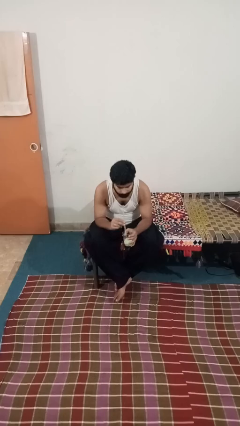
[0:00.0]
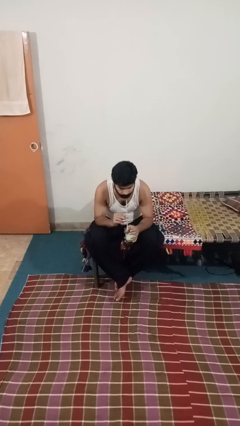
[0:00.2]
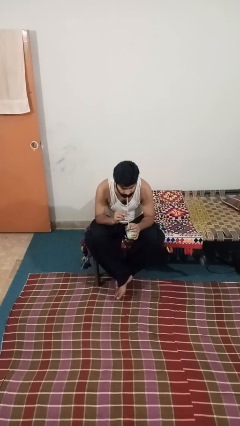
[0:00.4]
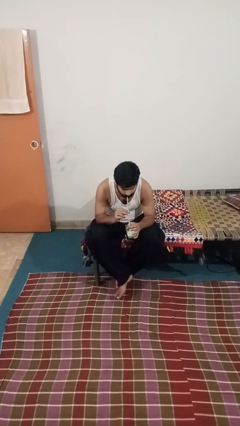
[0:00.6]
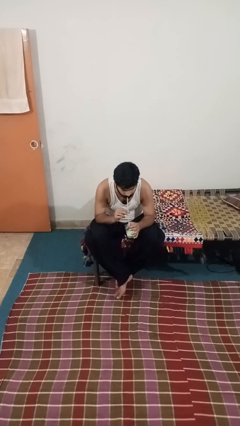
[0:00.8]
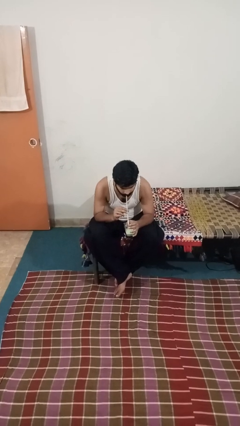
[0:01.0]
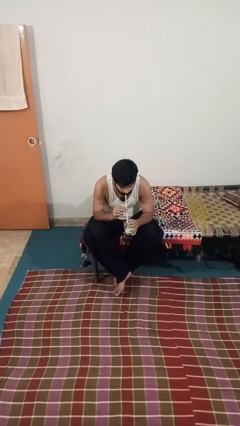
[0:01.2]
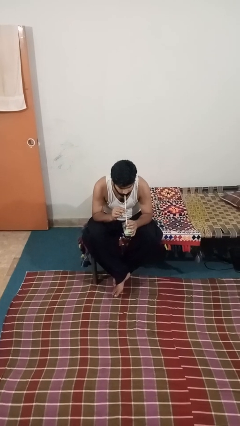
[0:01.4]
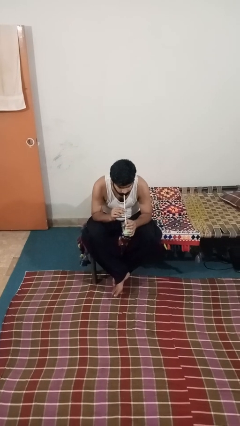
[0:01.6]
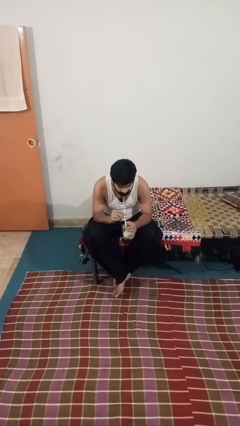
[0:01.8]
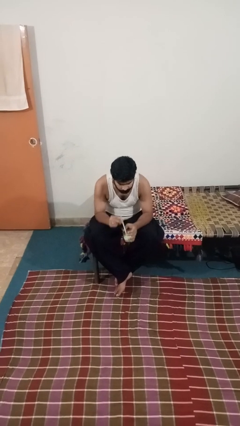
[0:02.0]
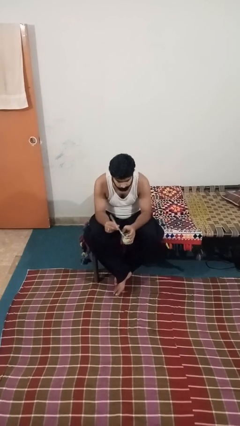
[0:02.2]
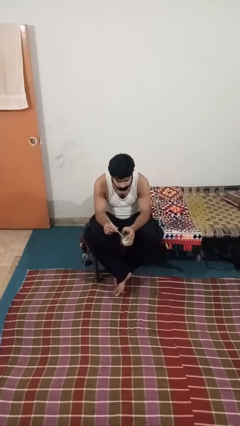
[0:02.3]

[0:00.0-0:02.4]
person drinks from straw

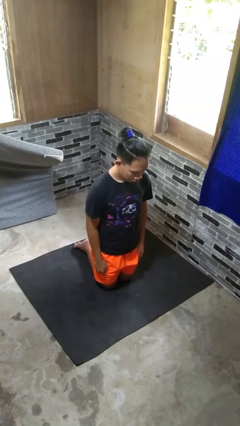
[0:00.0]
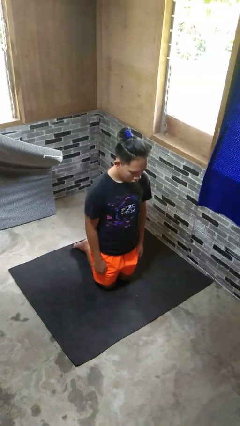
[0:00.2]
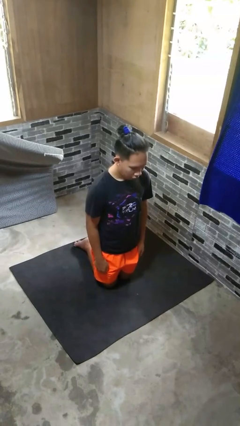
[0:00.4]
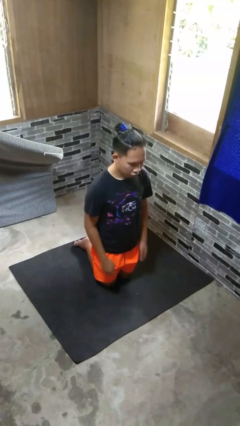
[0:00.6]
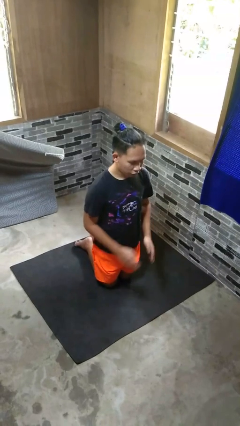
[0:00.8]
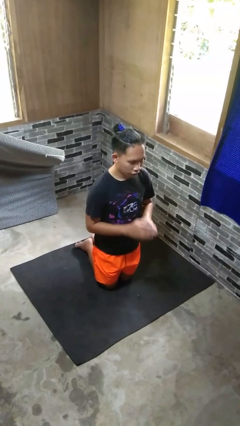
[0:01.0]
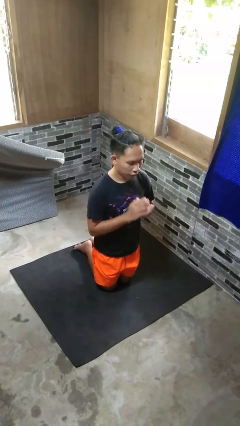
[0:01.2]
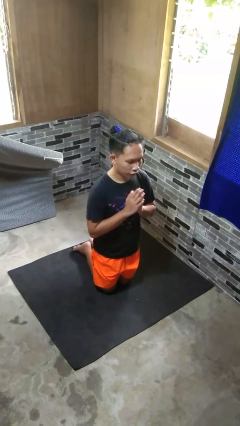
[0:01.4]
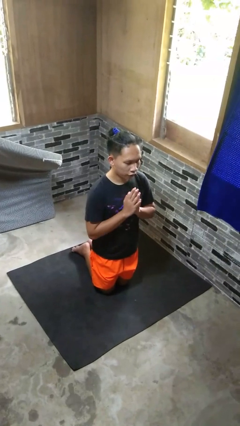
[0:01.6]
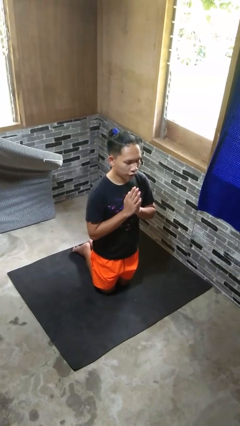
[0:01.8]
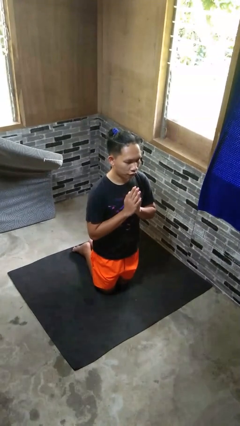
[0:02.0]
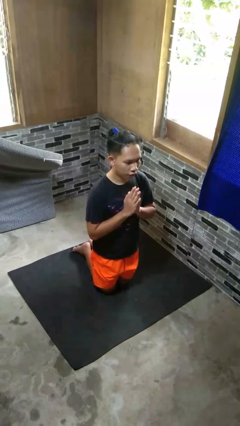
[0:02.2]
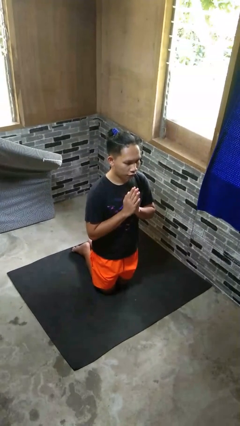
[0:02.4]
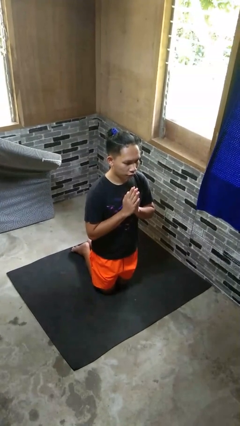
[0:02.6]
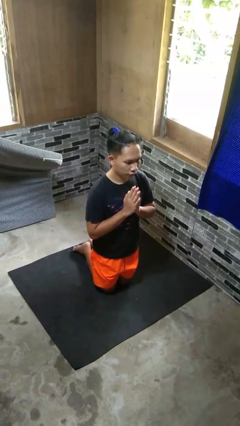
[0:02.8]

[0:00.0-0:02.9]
person prays

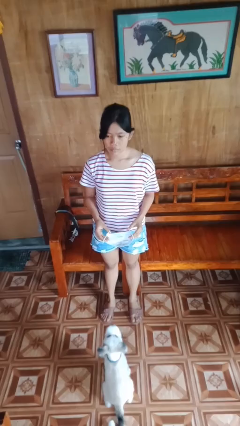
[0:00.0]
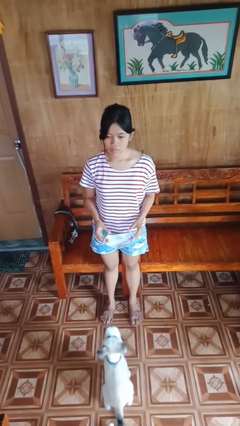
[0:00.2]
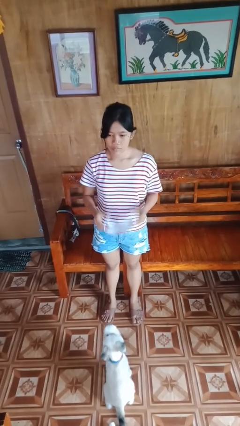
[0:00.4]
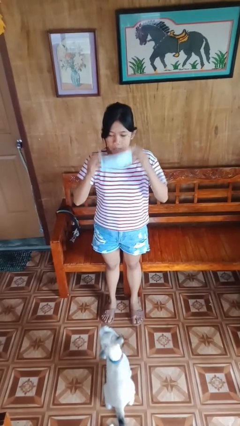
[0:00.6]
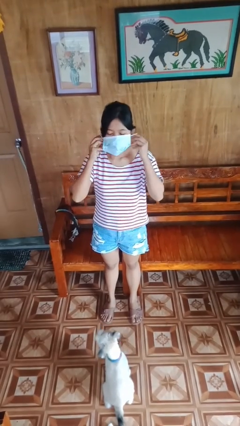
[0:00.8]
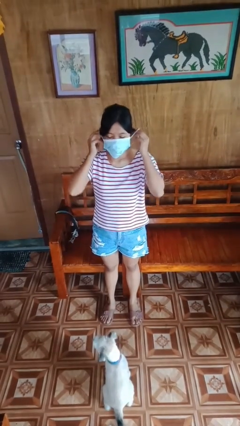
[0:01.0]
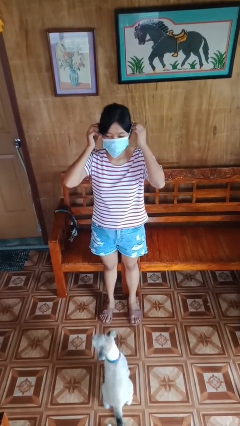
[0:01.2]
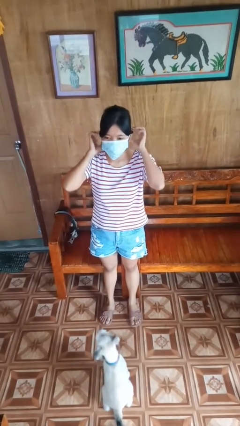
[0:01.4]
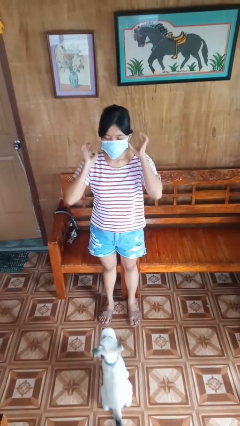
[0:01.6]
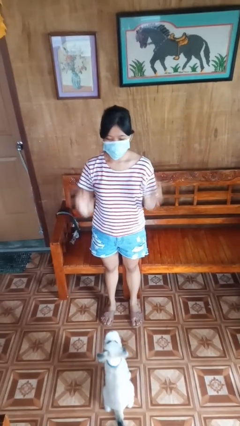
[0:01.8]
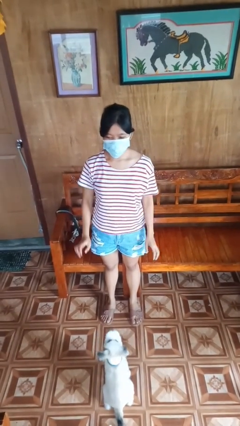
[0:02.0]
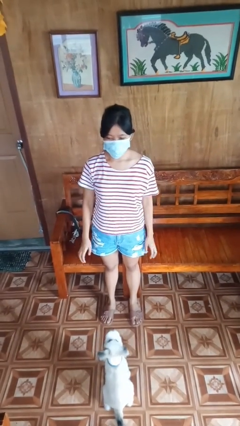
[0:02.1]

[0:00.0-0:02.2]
person puts on facemask

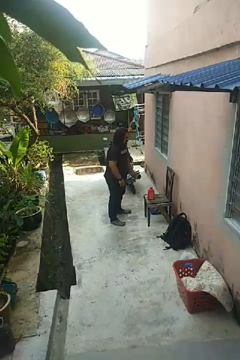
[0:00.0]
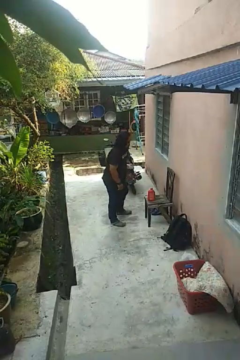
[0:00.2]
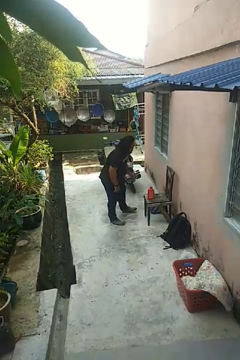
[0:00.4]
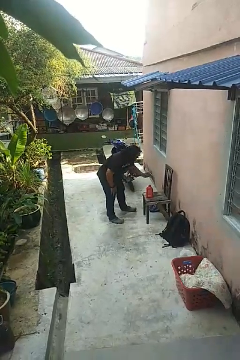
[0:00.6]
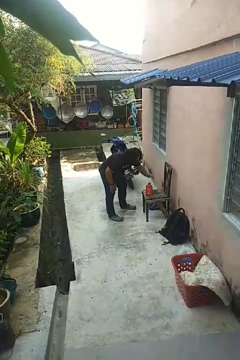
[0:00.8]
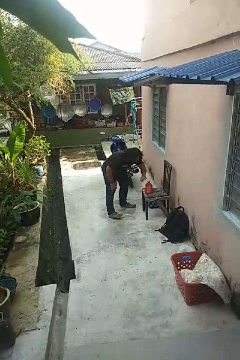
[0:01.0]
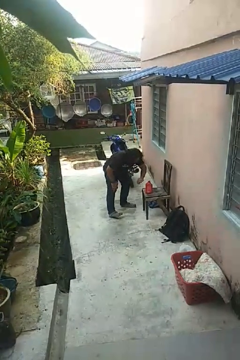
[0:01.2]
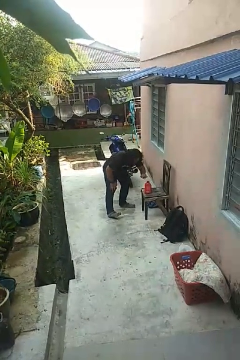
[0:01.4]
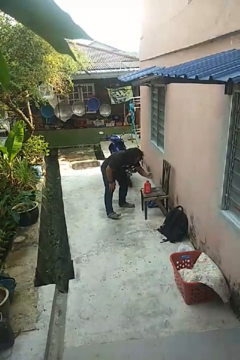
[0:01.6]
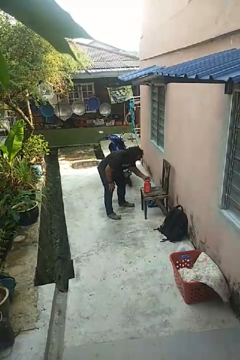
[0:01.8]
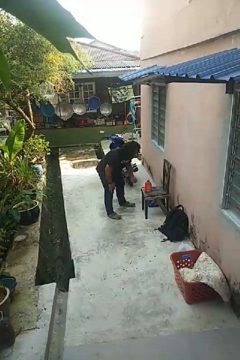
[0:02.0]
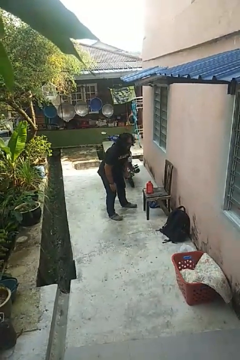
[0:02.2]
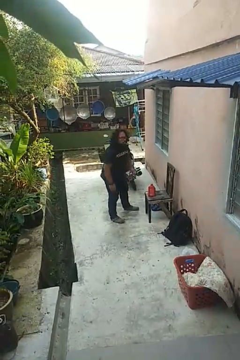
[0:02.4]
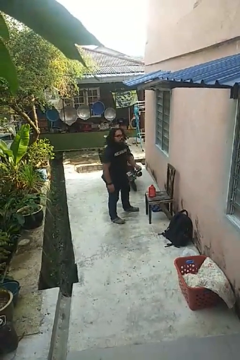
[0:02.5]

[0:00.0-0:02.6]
person waves hand over object

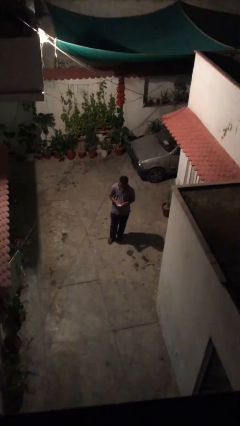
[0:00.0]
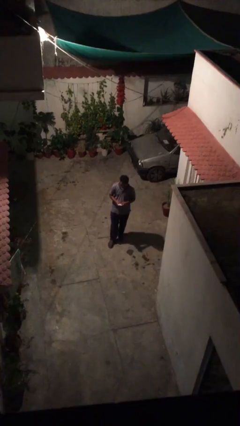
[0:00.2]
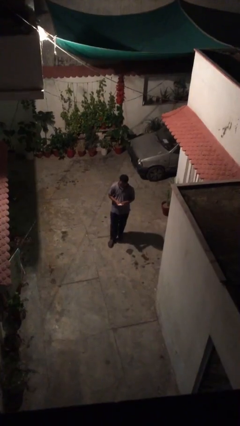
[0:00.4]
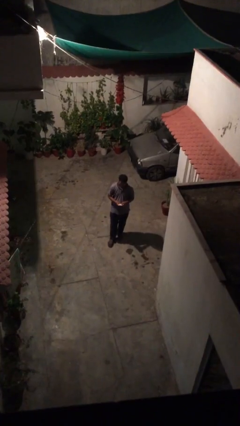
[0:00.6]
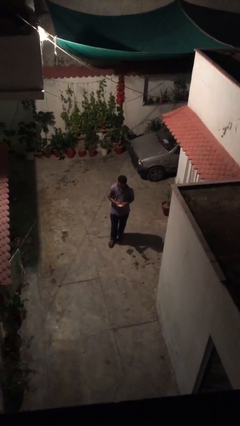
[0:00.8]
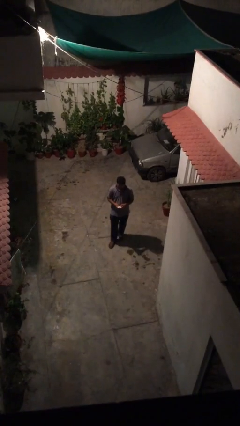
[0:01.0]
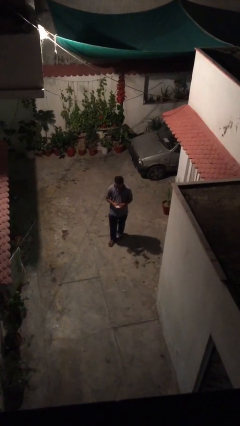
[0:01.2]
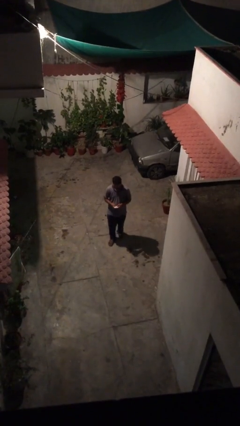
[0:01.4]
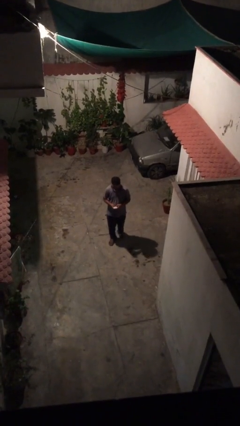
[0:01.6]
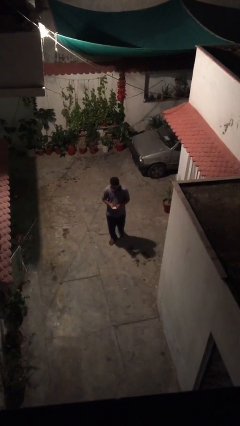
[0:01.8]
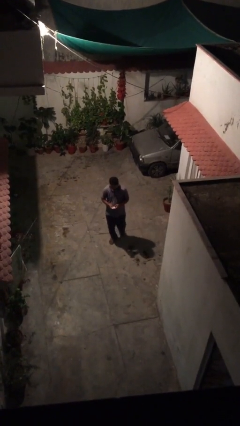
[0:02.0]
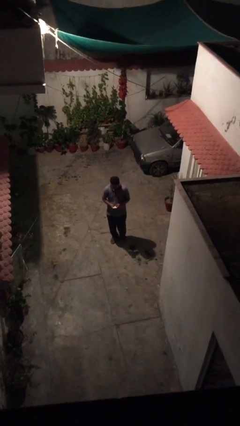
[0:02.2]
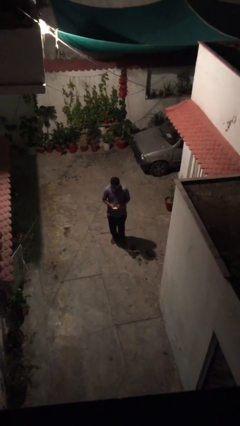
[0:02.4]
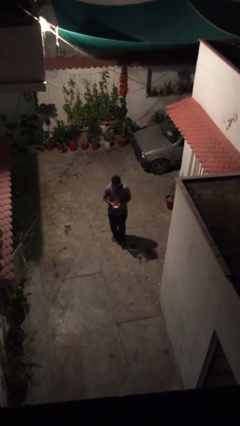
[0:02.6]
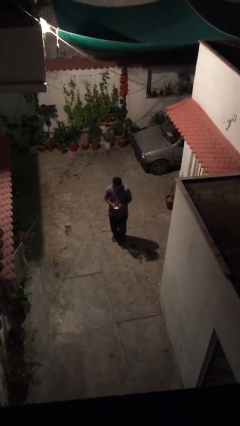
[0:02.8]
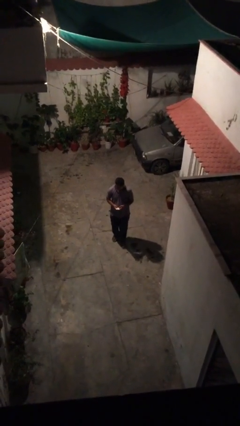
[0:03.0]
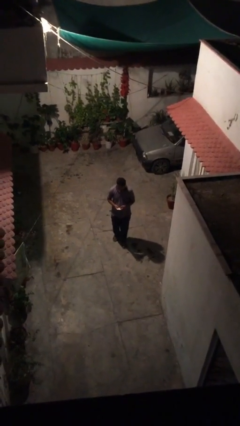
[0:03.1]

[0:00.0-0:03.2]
person texts on phone

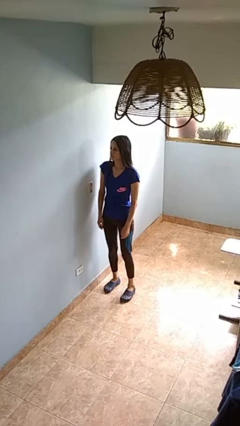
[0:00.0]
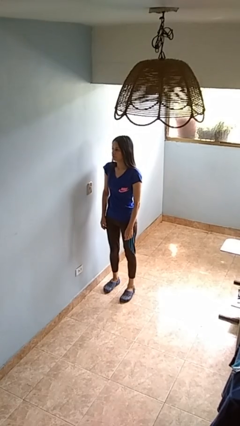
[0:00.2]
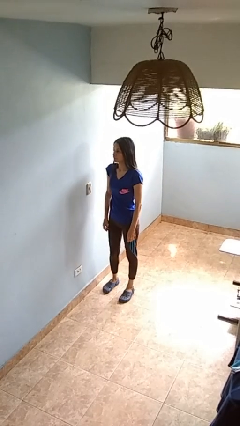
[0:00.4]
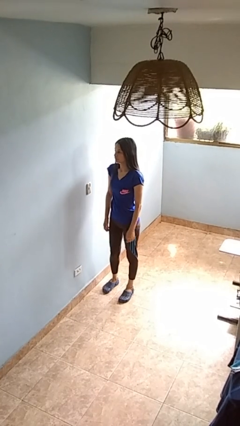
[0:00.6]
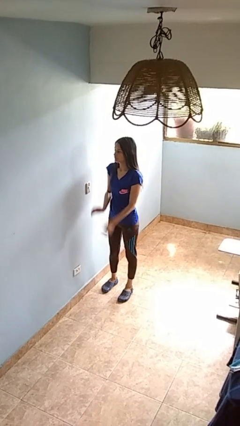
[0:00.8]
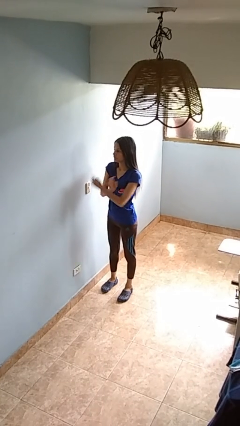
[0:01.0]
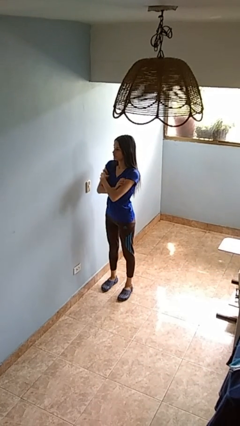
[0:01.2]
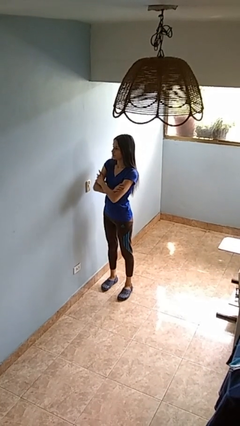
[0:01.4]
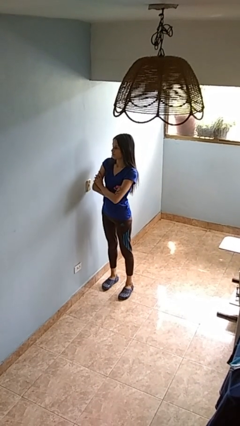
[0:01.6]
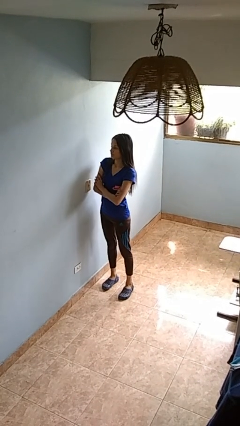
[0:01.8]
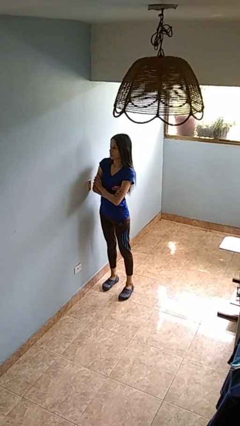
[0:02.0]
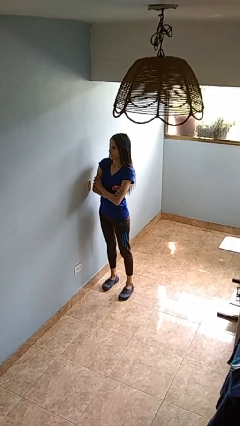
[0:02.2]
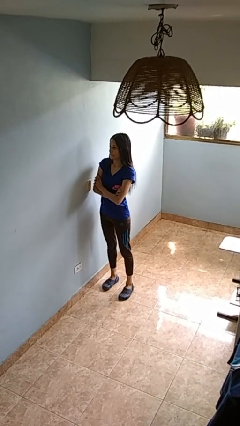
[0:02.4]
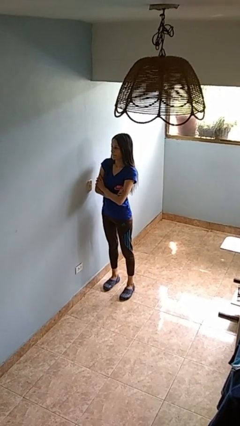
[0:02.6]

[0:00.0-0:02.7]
person crosses arms

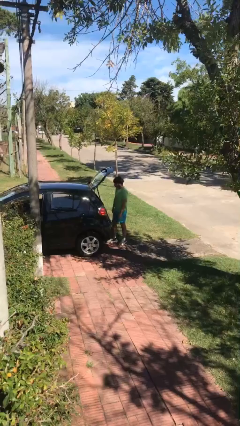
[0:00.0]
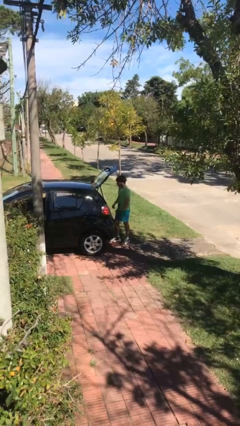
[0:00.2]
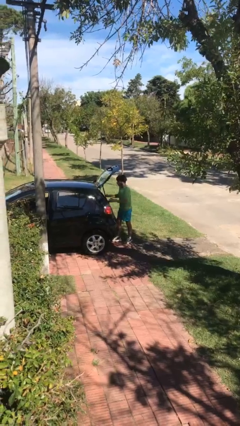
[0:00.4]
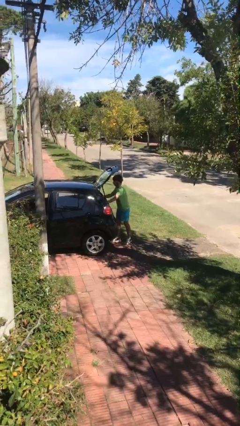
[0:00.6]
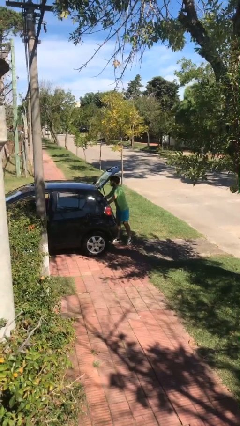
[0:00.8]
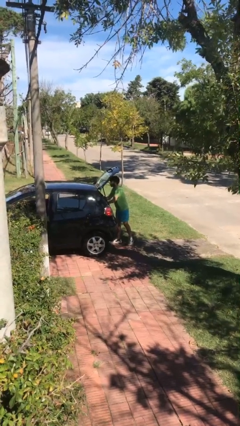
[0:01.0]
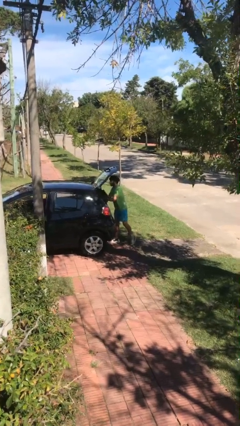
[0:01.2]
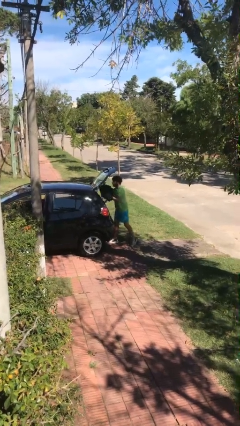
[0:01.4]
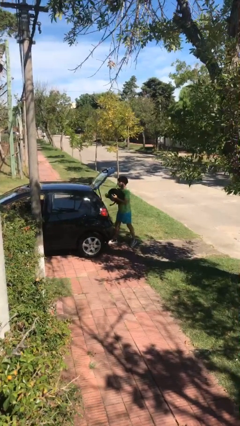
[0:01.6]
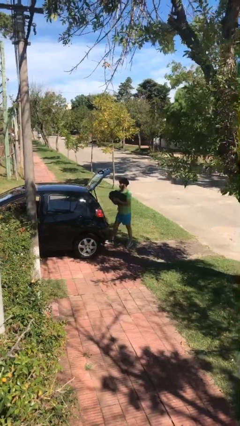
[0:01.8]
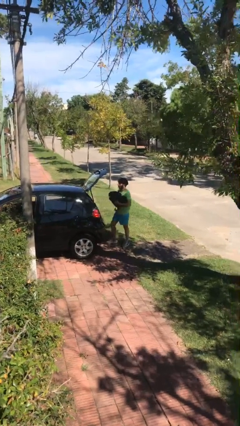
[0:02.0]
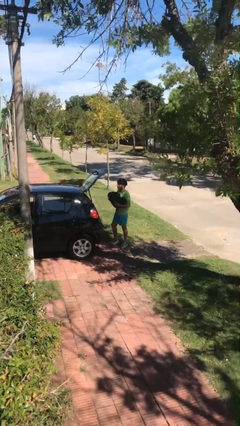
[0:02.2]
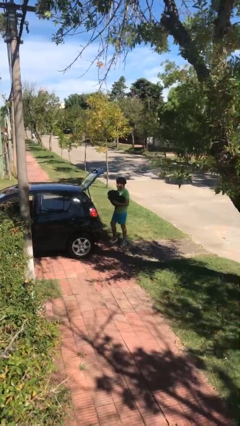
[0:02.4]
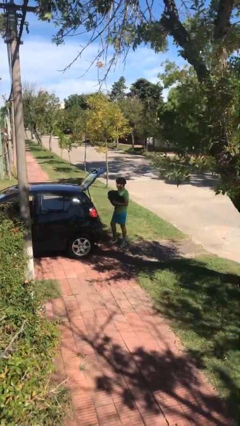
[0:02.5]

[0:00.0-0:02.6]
person unloads car
